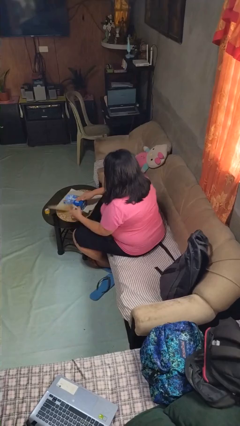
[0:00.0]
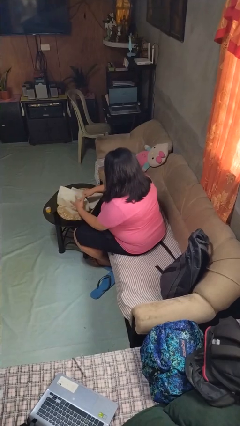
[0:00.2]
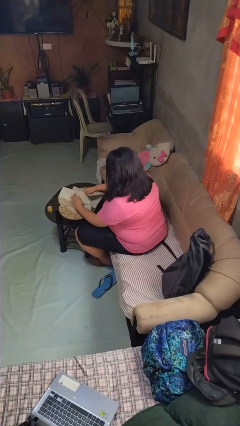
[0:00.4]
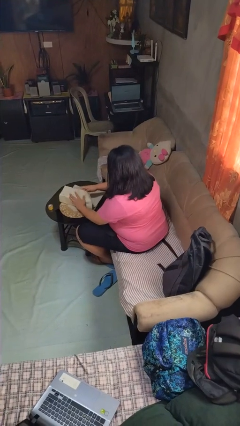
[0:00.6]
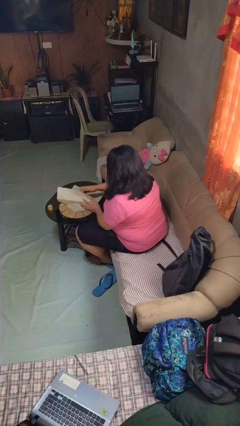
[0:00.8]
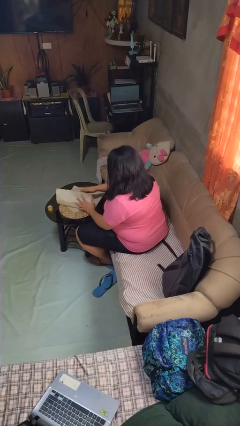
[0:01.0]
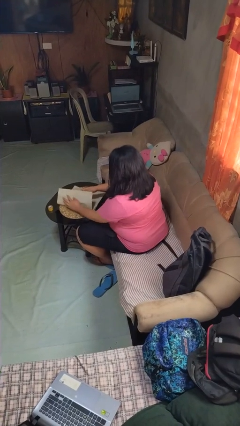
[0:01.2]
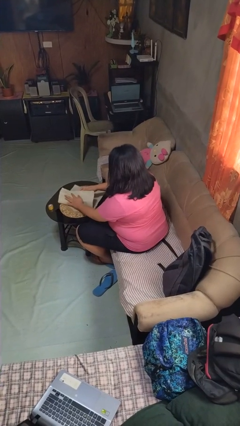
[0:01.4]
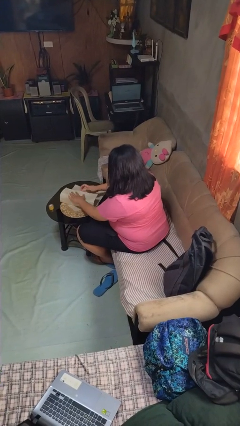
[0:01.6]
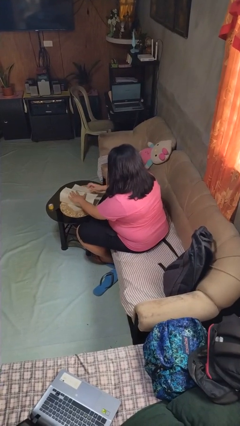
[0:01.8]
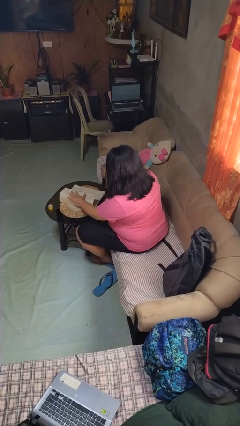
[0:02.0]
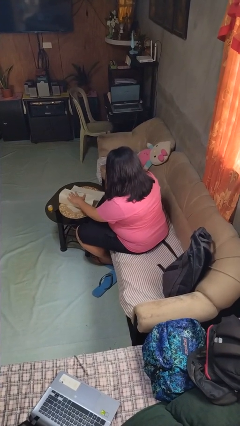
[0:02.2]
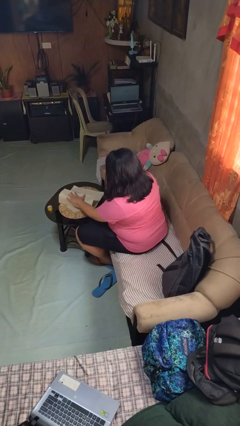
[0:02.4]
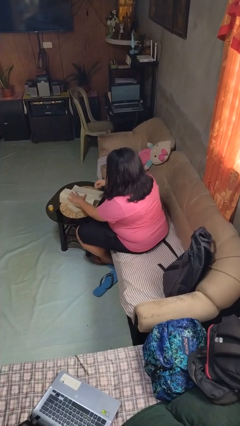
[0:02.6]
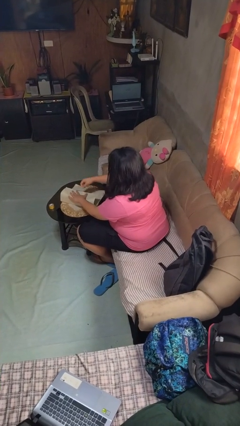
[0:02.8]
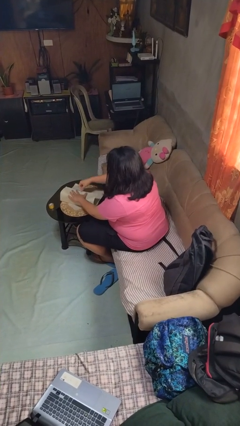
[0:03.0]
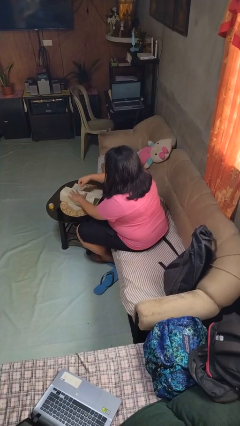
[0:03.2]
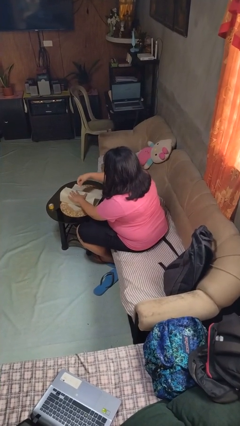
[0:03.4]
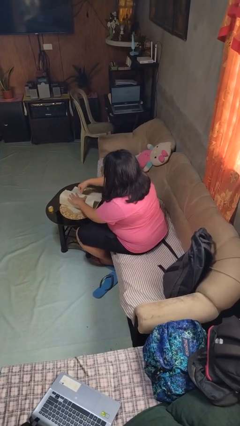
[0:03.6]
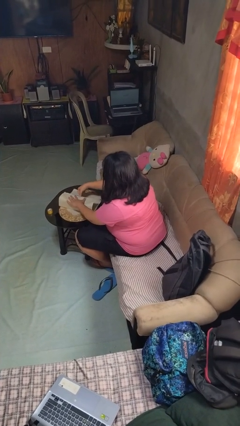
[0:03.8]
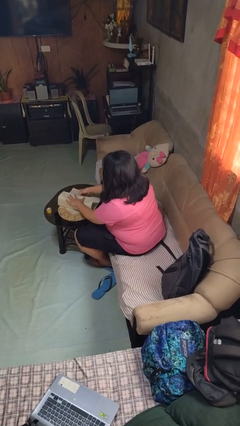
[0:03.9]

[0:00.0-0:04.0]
person wraps box

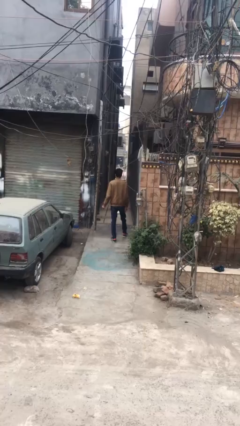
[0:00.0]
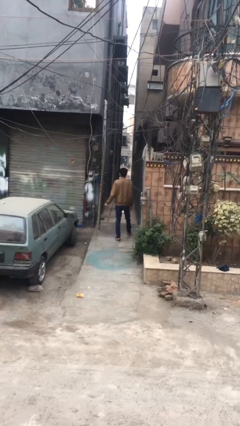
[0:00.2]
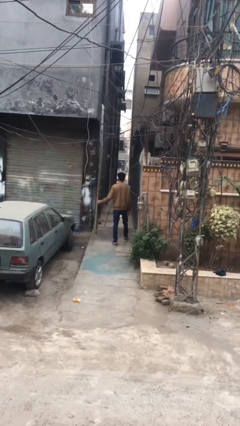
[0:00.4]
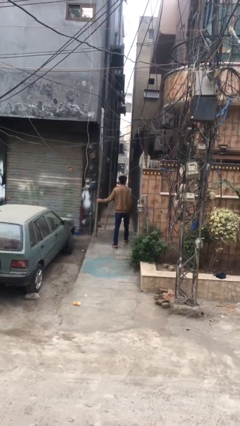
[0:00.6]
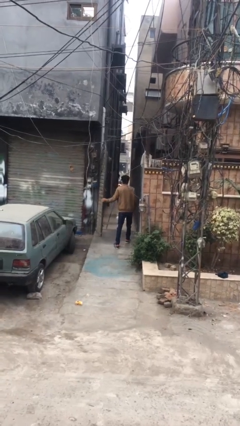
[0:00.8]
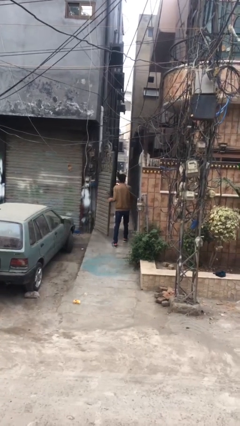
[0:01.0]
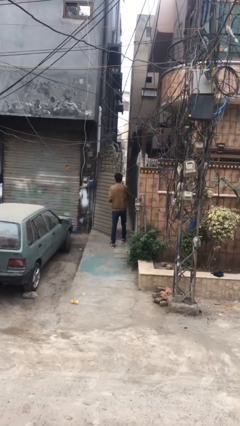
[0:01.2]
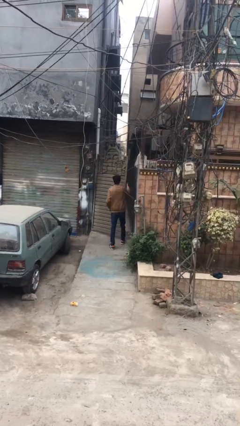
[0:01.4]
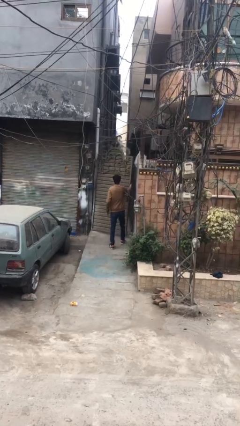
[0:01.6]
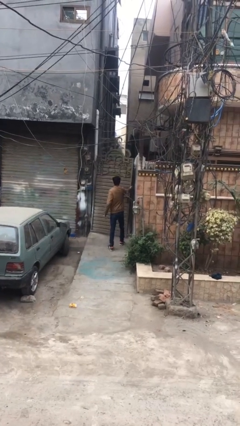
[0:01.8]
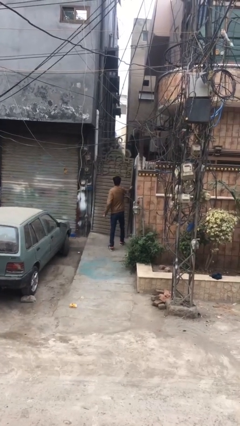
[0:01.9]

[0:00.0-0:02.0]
person closes facility door

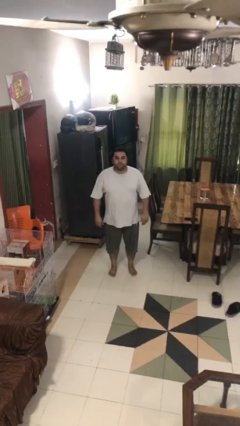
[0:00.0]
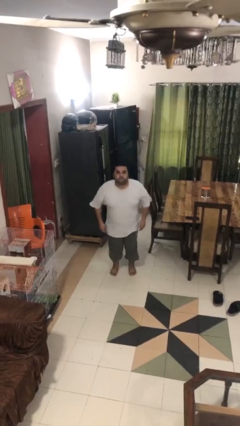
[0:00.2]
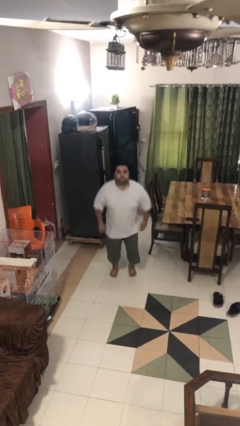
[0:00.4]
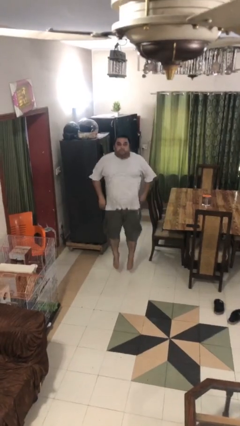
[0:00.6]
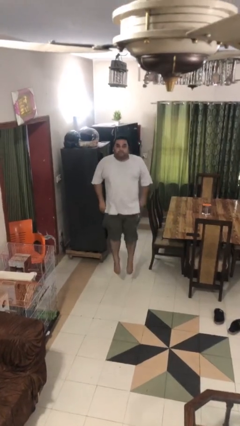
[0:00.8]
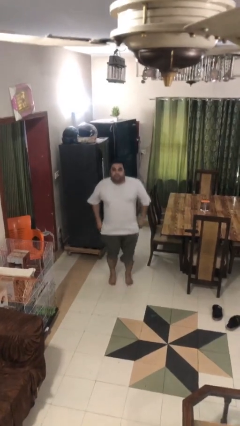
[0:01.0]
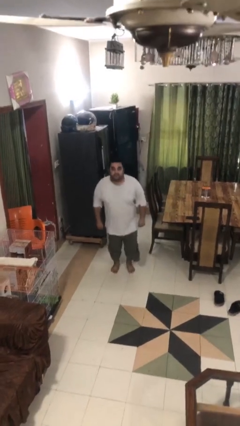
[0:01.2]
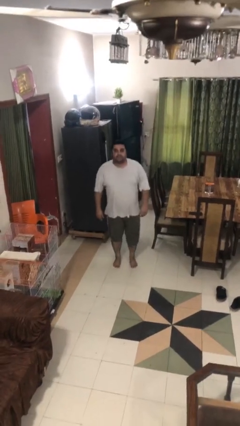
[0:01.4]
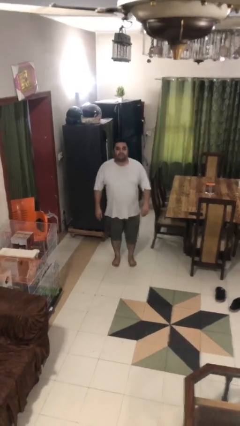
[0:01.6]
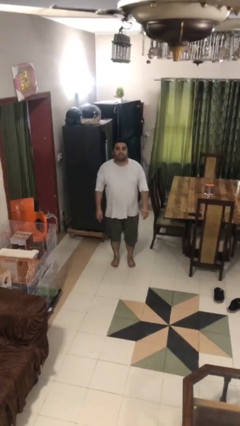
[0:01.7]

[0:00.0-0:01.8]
person jumps

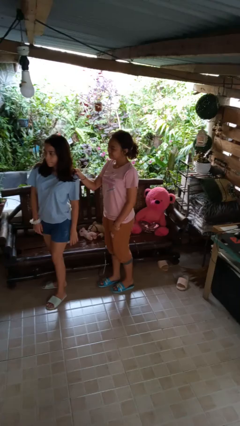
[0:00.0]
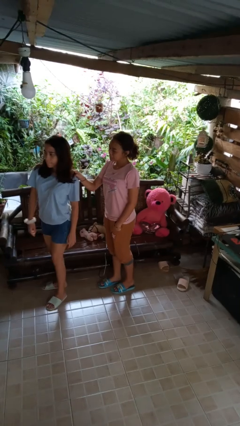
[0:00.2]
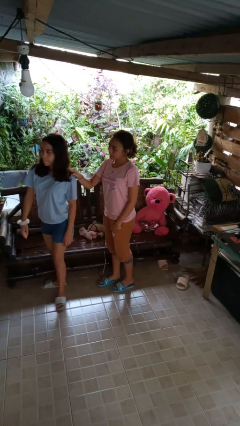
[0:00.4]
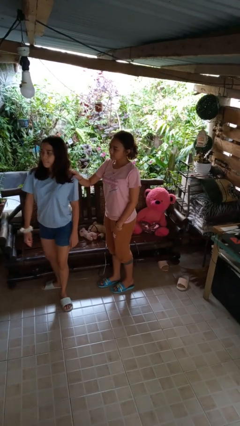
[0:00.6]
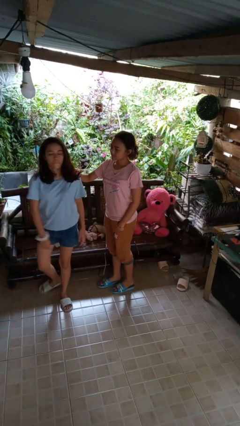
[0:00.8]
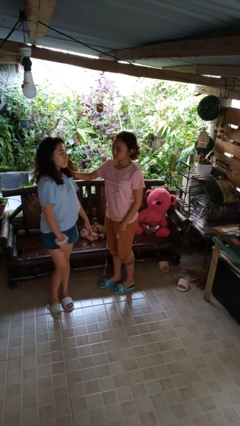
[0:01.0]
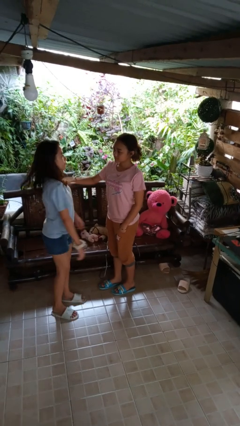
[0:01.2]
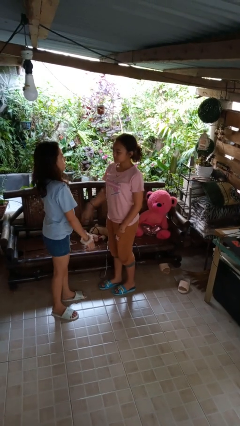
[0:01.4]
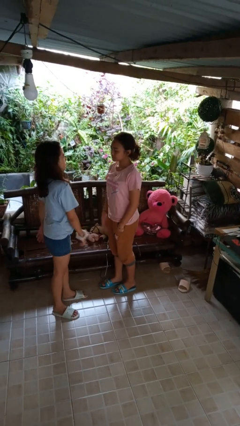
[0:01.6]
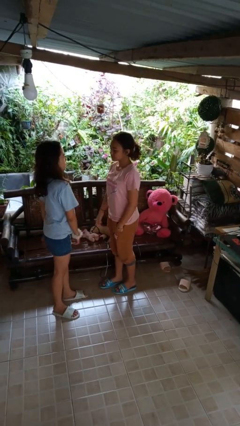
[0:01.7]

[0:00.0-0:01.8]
person spins person around

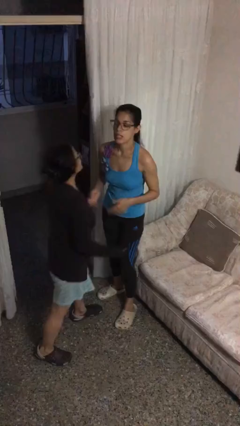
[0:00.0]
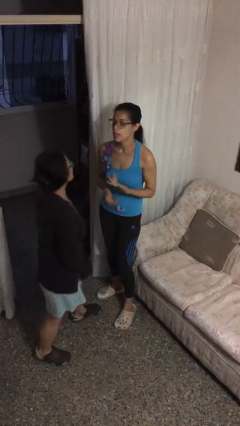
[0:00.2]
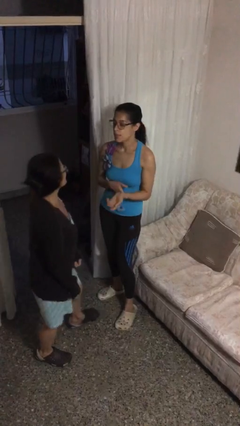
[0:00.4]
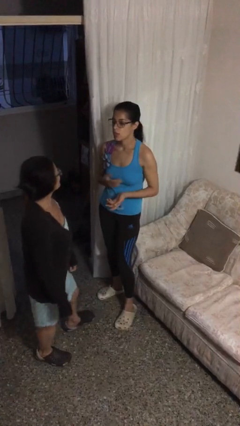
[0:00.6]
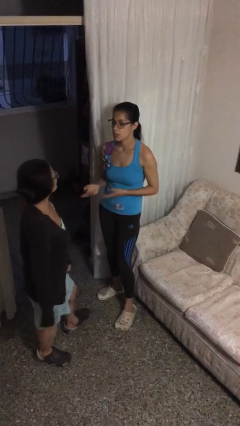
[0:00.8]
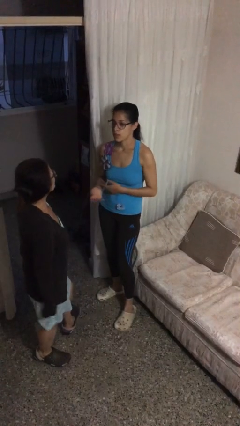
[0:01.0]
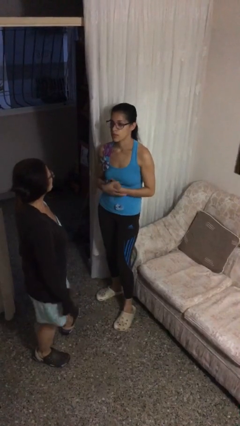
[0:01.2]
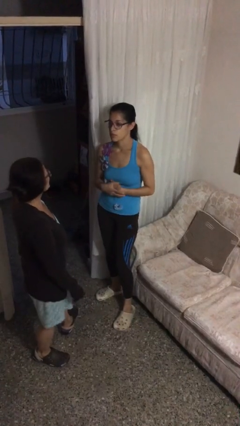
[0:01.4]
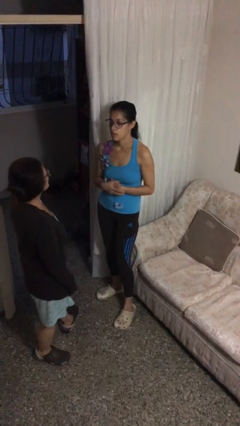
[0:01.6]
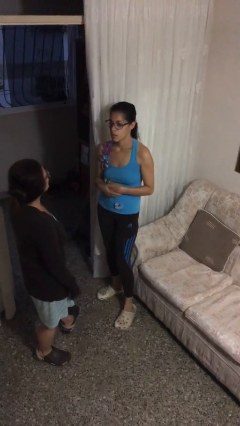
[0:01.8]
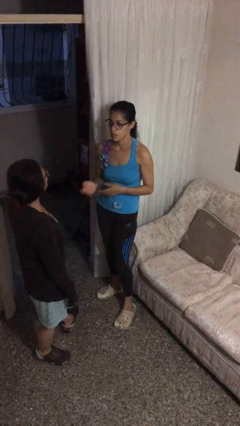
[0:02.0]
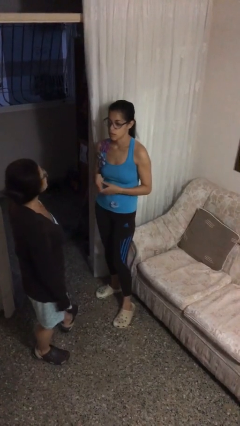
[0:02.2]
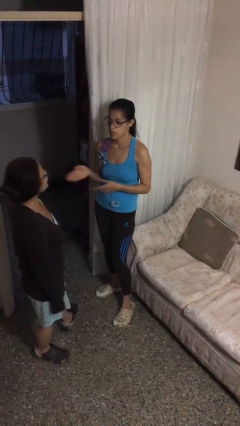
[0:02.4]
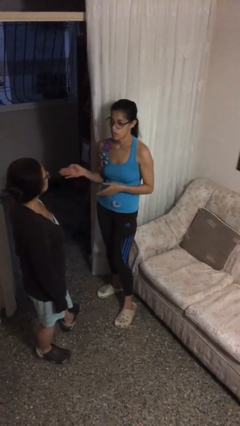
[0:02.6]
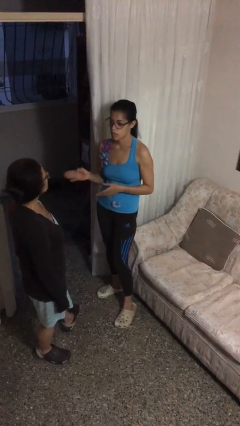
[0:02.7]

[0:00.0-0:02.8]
person talks to person

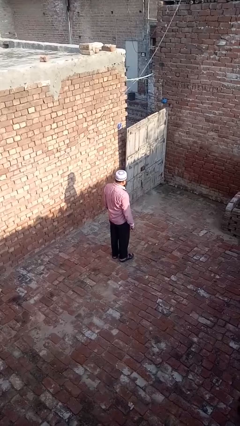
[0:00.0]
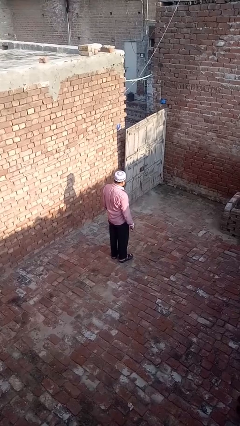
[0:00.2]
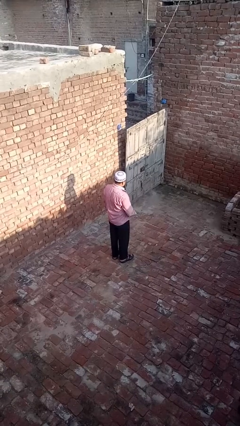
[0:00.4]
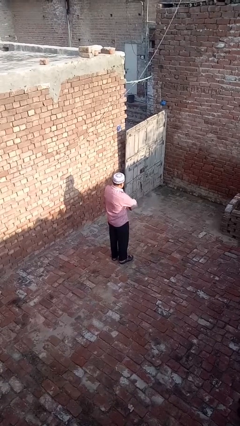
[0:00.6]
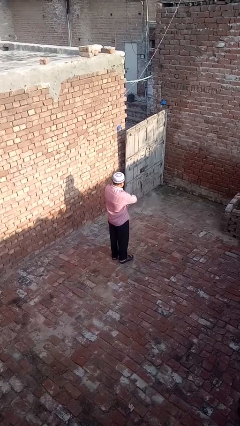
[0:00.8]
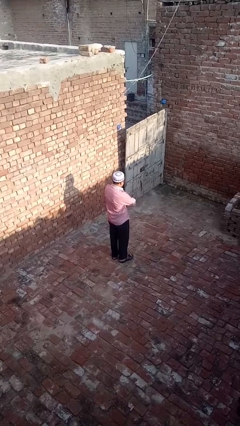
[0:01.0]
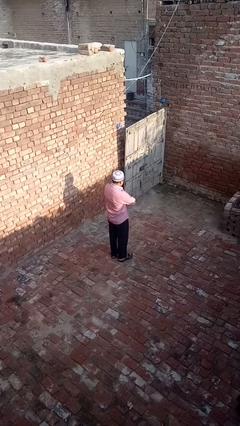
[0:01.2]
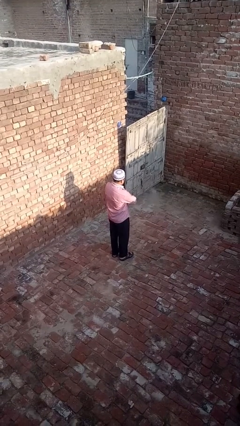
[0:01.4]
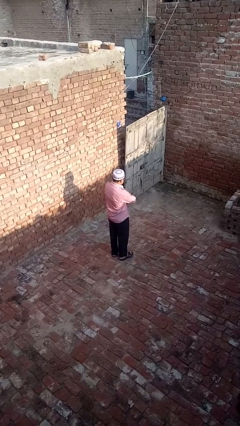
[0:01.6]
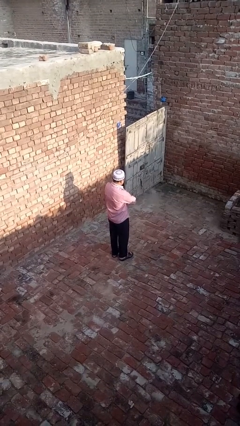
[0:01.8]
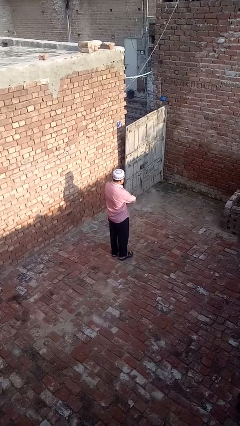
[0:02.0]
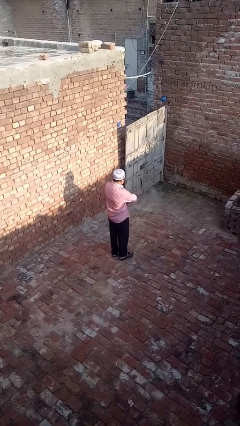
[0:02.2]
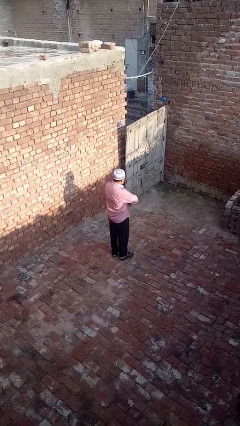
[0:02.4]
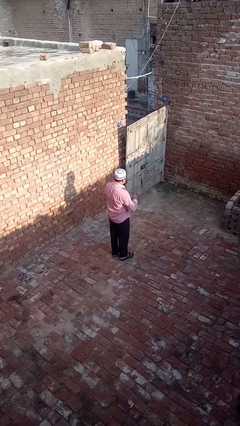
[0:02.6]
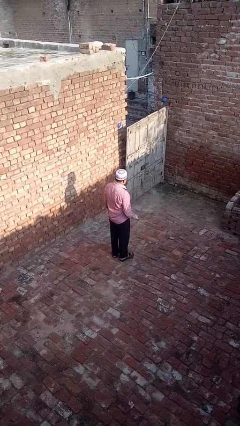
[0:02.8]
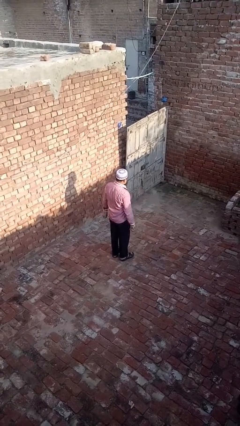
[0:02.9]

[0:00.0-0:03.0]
person crosses arms

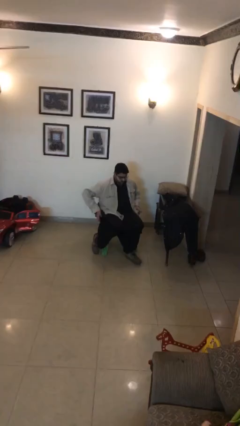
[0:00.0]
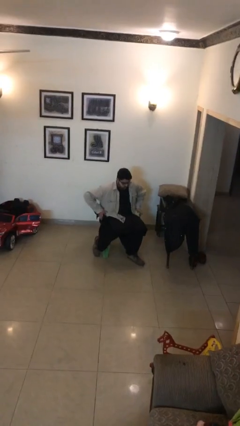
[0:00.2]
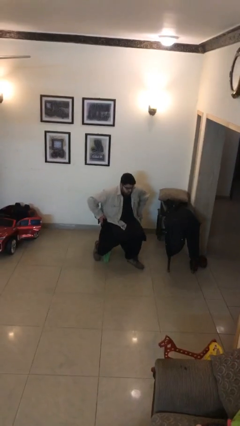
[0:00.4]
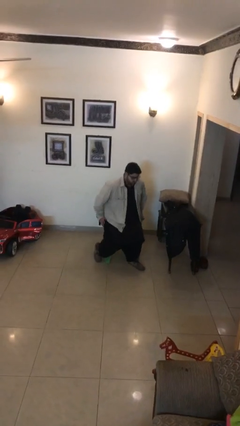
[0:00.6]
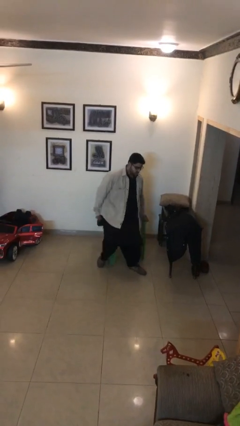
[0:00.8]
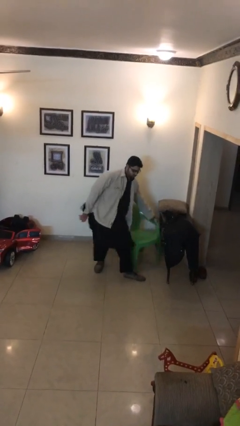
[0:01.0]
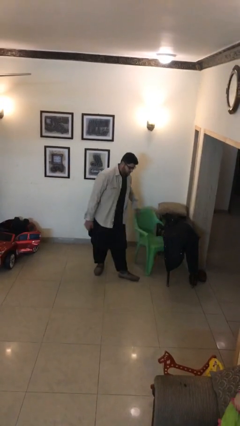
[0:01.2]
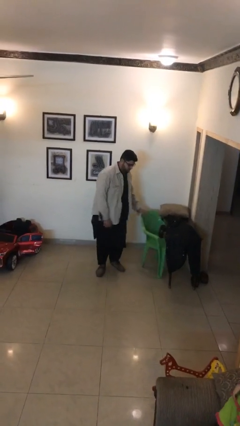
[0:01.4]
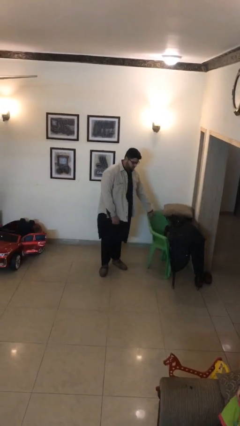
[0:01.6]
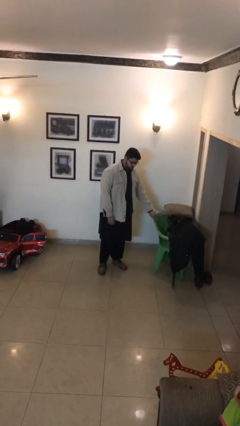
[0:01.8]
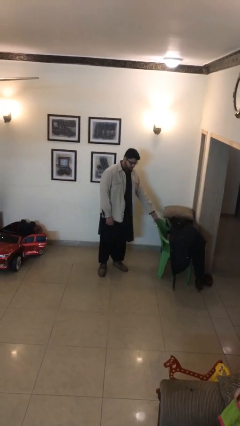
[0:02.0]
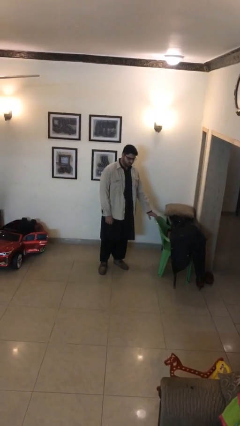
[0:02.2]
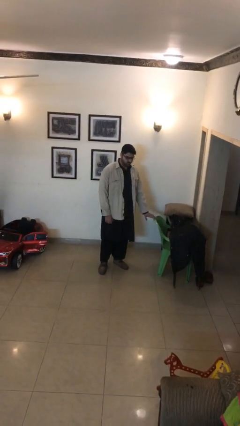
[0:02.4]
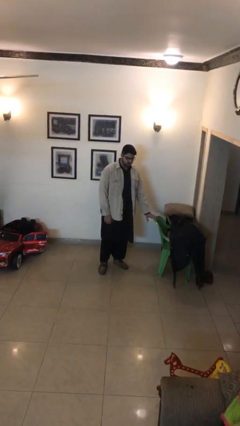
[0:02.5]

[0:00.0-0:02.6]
person stands up
